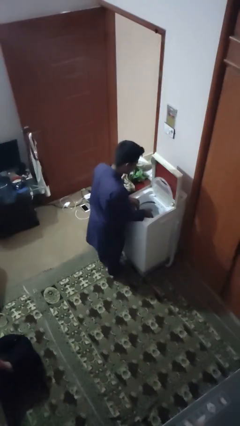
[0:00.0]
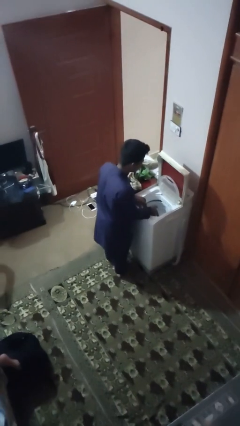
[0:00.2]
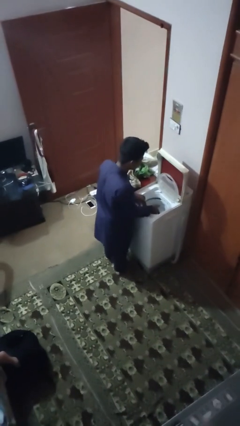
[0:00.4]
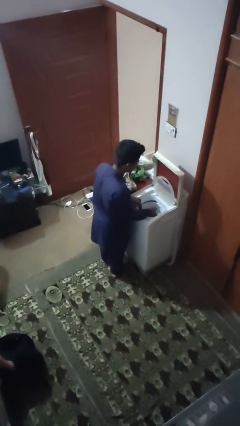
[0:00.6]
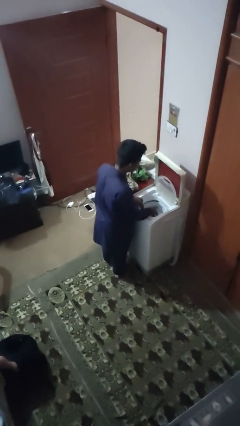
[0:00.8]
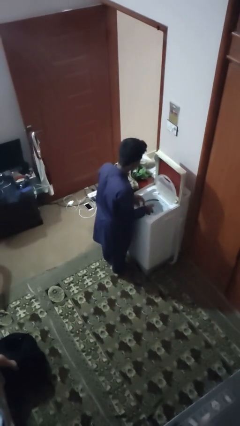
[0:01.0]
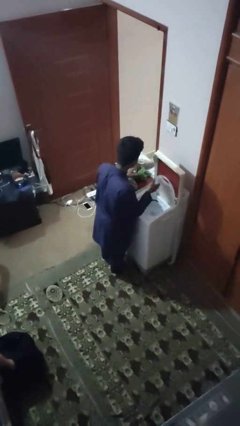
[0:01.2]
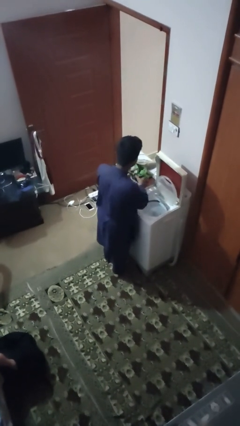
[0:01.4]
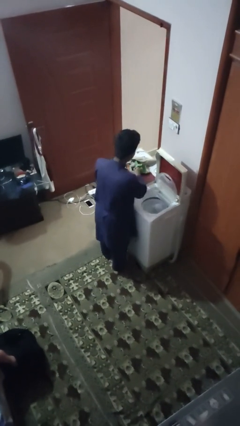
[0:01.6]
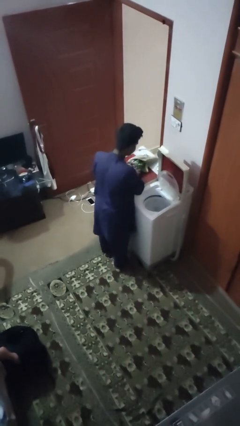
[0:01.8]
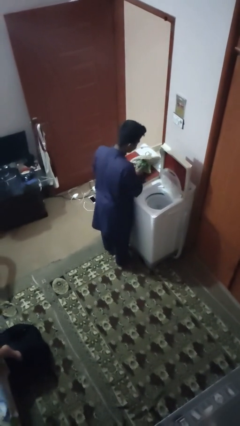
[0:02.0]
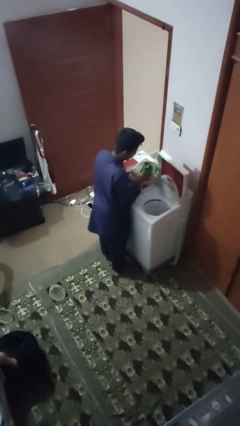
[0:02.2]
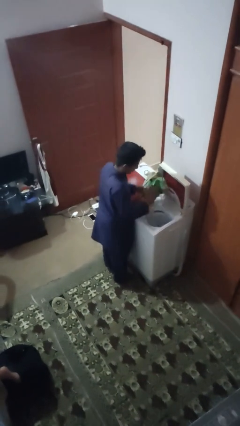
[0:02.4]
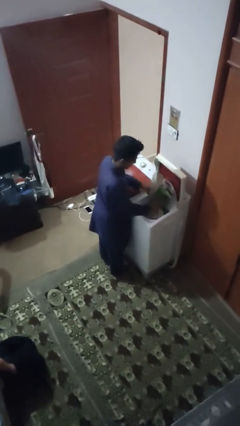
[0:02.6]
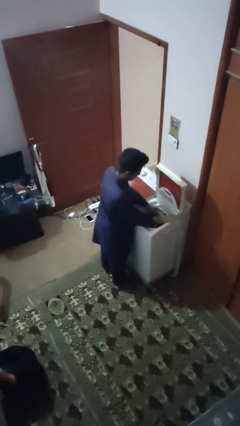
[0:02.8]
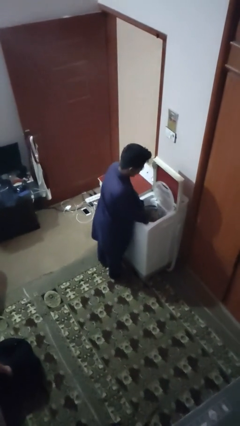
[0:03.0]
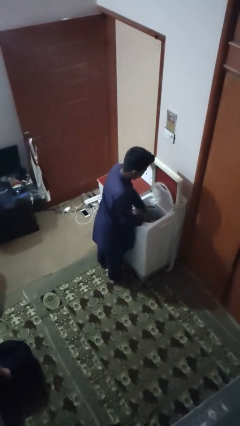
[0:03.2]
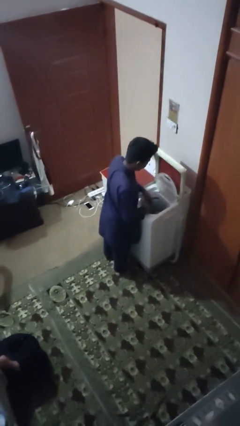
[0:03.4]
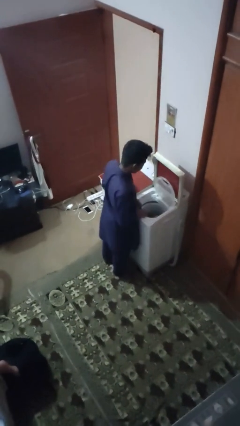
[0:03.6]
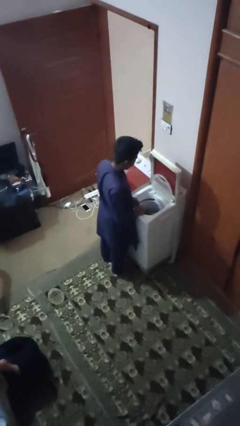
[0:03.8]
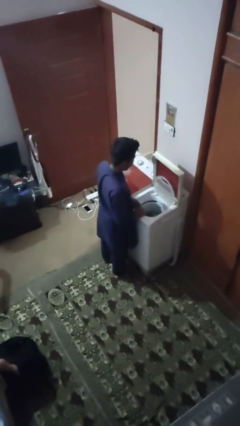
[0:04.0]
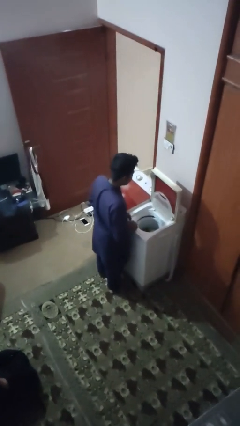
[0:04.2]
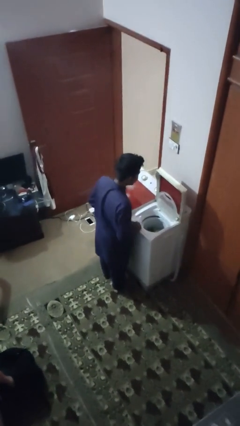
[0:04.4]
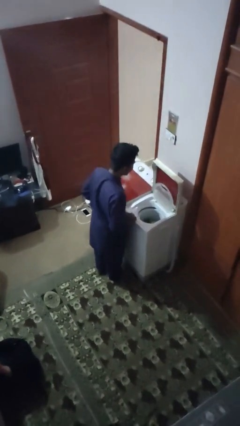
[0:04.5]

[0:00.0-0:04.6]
person loads dryer

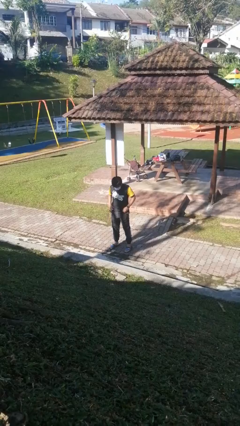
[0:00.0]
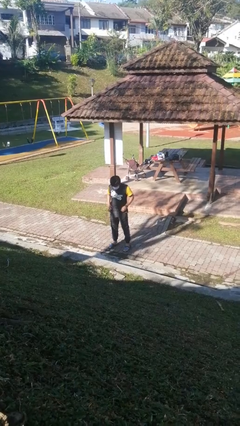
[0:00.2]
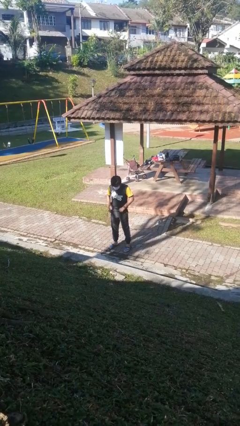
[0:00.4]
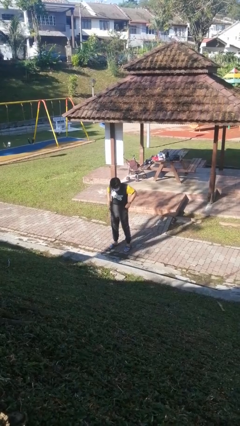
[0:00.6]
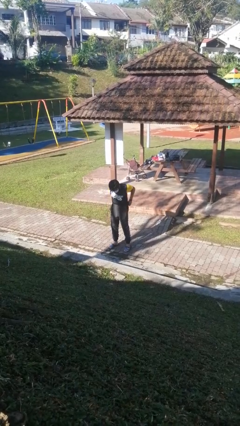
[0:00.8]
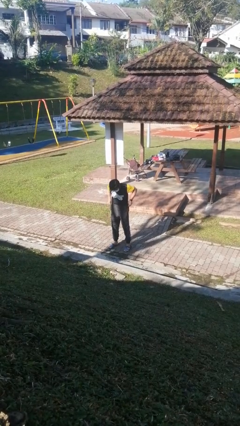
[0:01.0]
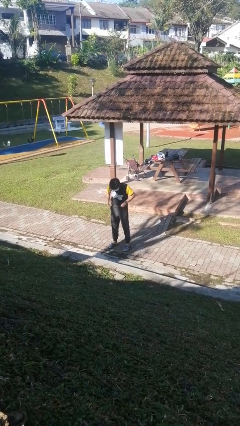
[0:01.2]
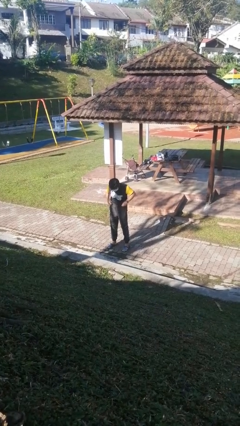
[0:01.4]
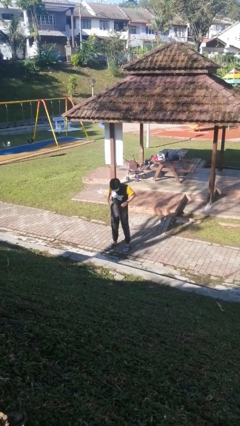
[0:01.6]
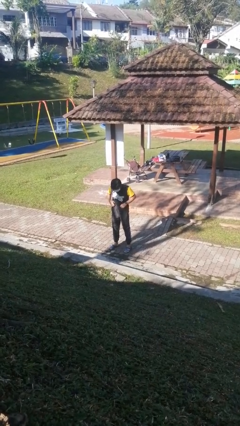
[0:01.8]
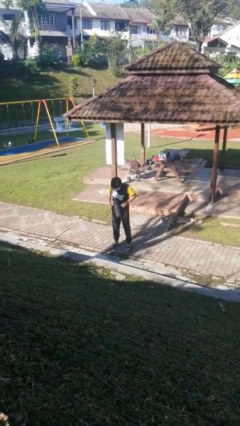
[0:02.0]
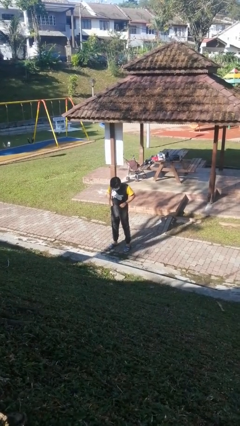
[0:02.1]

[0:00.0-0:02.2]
person hikes up pants

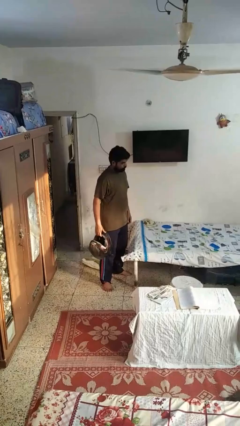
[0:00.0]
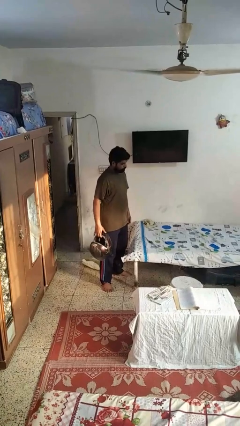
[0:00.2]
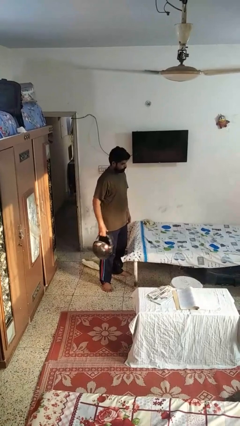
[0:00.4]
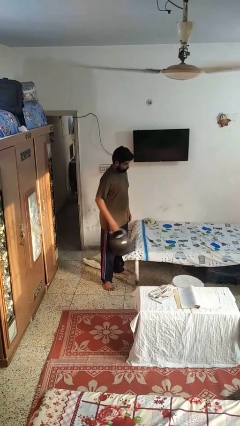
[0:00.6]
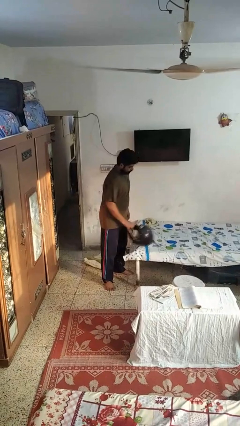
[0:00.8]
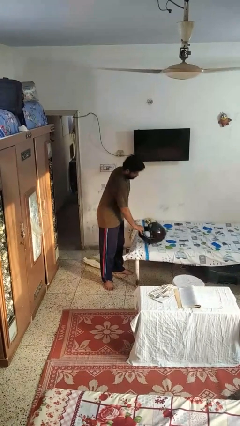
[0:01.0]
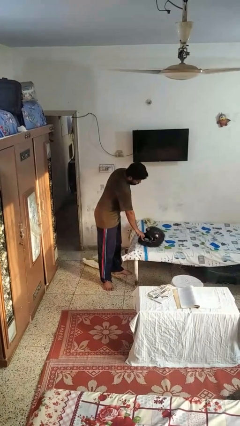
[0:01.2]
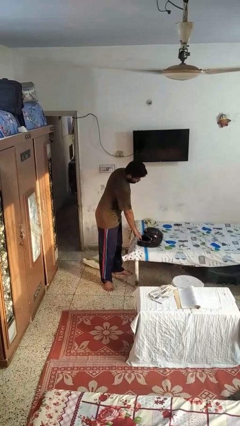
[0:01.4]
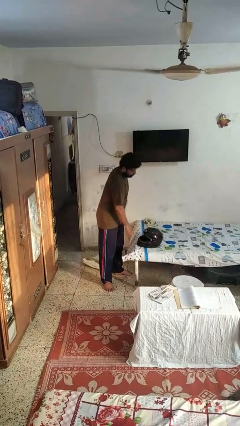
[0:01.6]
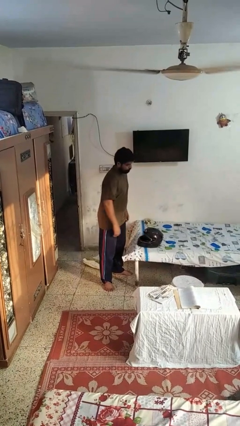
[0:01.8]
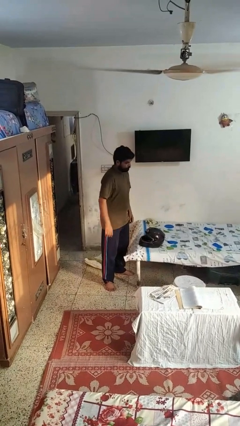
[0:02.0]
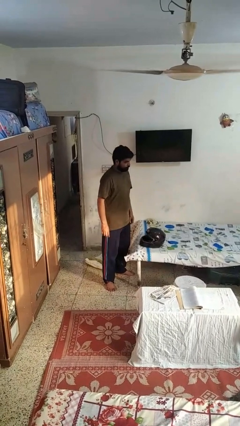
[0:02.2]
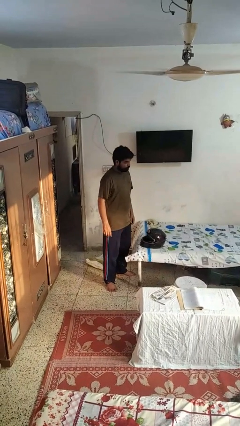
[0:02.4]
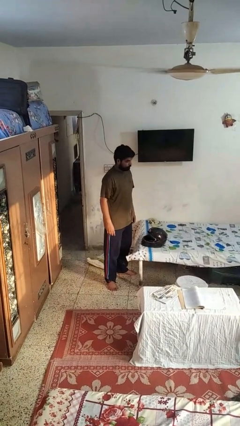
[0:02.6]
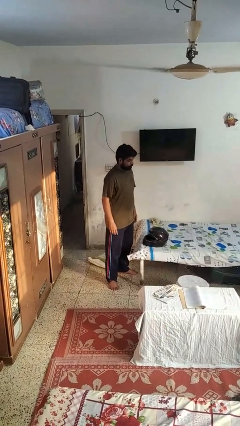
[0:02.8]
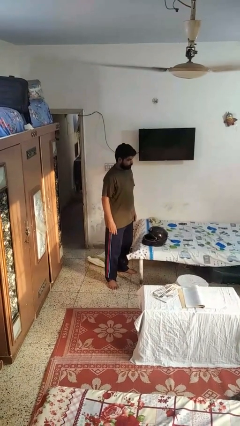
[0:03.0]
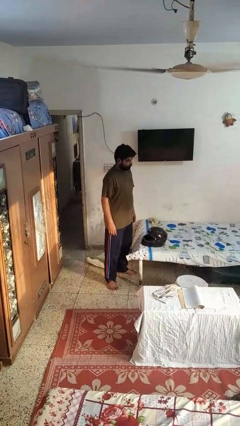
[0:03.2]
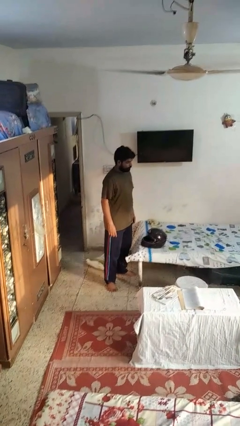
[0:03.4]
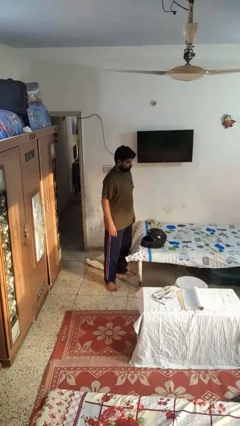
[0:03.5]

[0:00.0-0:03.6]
person puts down object on bed

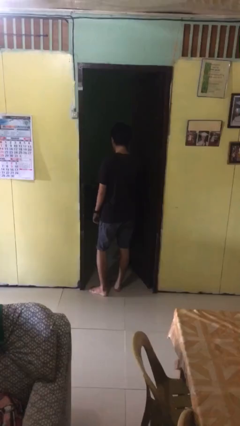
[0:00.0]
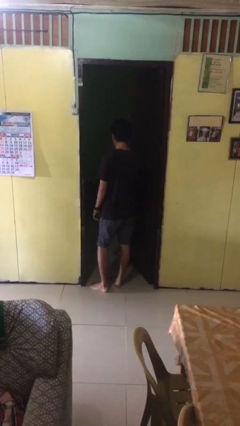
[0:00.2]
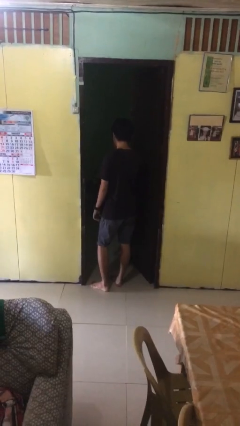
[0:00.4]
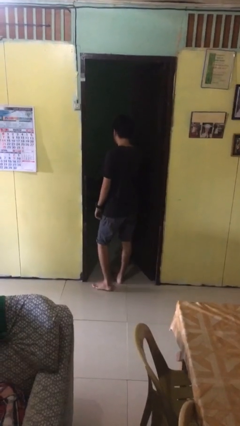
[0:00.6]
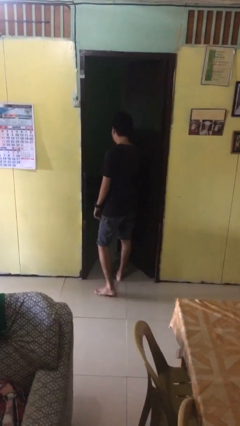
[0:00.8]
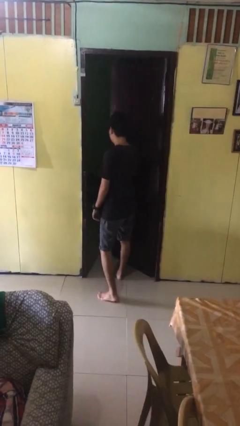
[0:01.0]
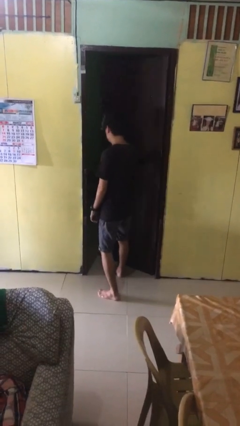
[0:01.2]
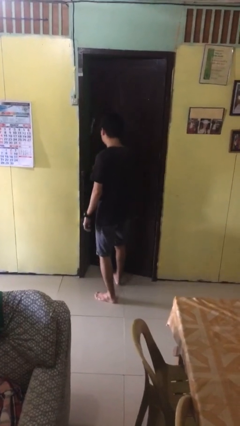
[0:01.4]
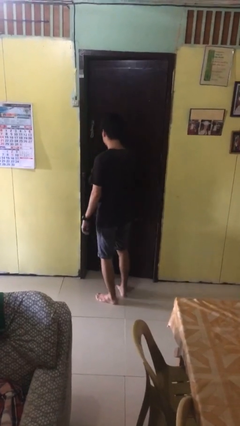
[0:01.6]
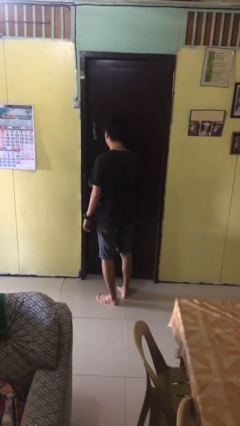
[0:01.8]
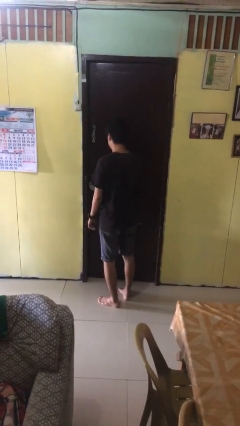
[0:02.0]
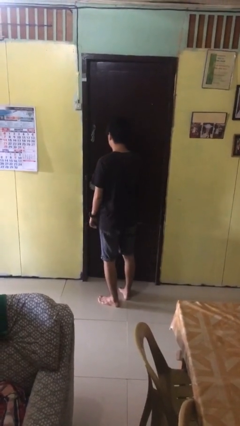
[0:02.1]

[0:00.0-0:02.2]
person closes facility door

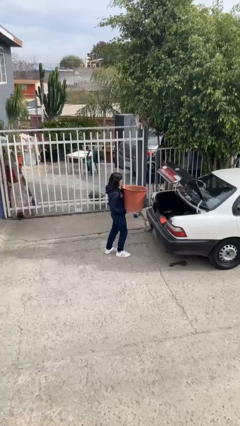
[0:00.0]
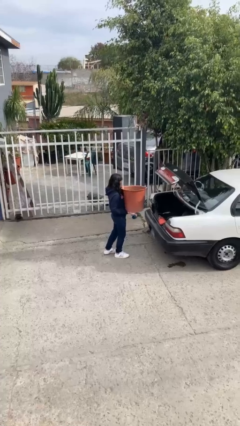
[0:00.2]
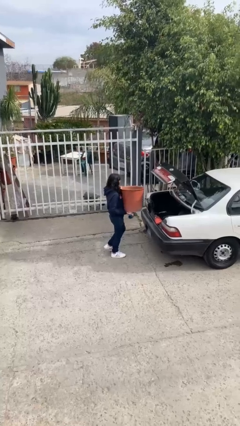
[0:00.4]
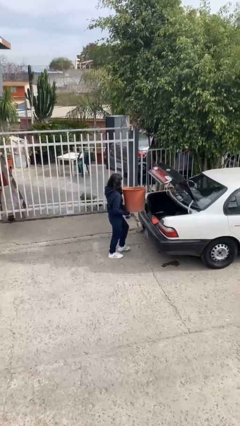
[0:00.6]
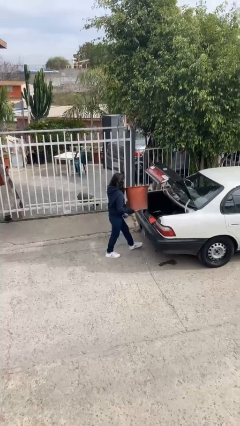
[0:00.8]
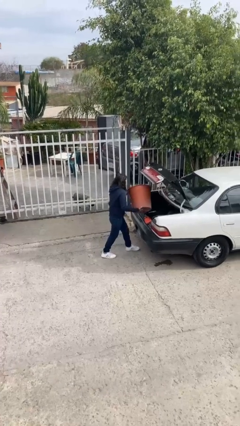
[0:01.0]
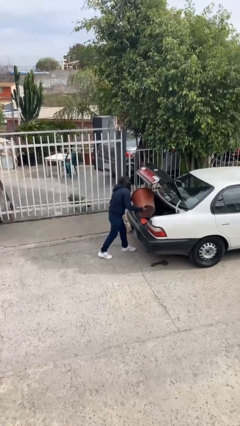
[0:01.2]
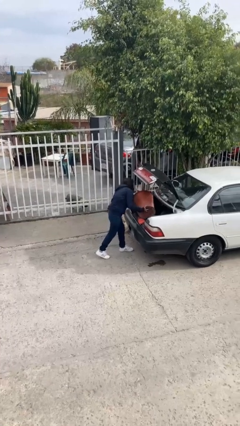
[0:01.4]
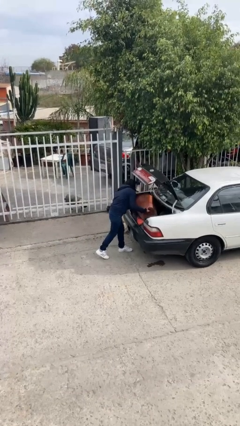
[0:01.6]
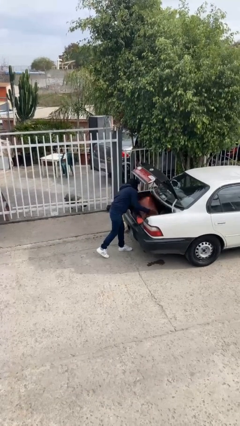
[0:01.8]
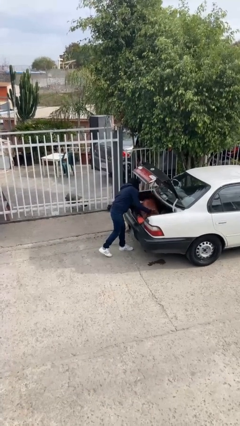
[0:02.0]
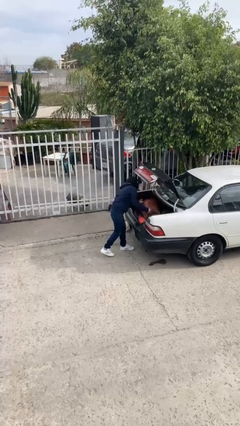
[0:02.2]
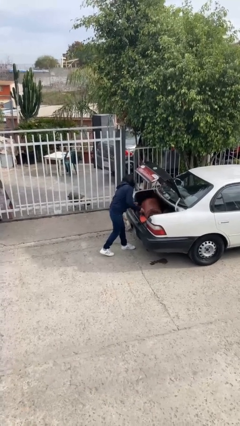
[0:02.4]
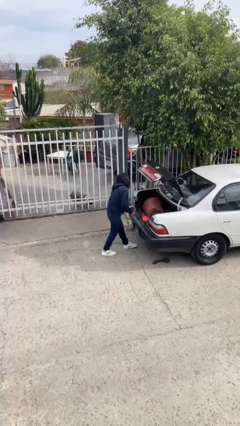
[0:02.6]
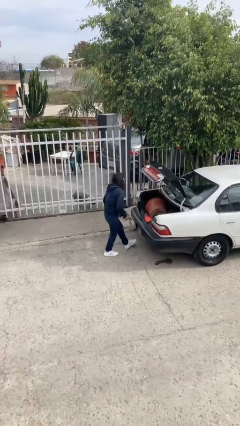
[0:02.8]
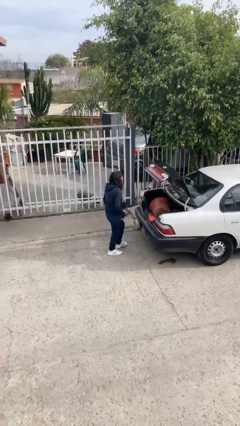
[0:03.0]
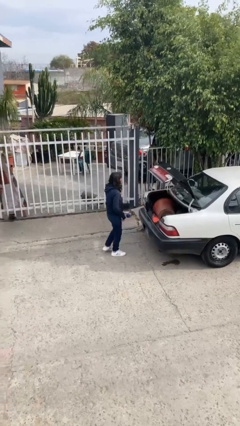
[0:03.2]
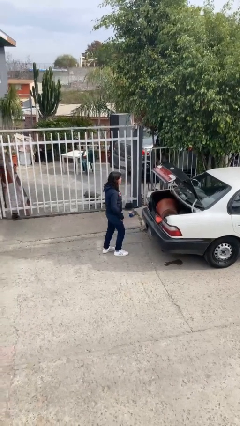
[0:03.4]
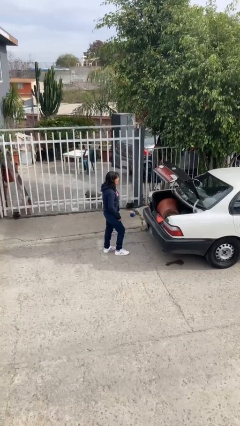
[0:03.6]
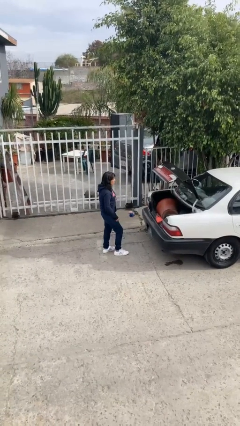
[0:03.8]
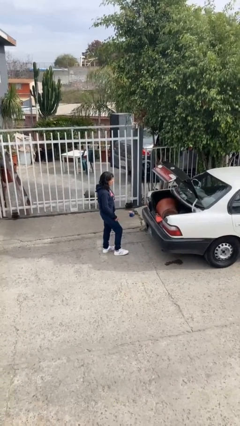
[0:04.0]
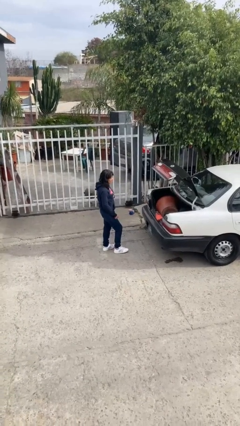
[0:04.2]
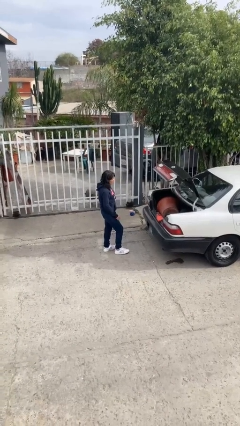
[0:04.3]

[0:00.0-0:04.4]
person loads car

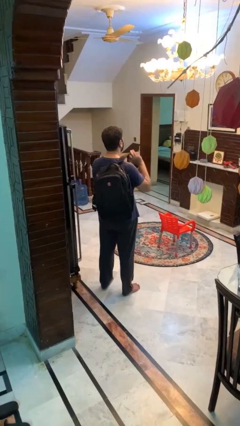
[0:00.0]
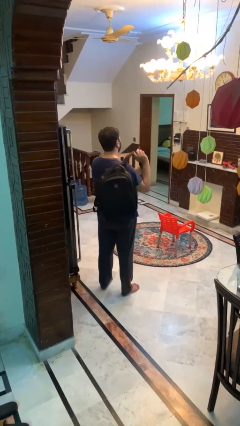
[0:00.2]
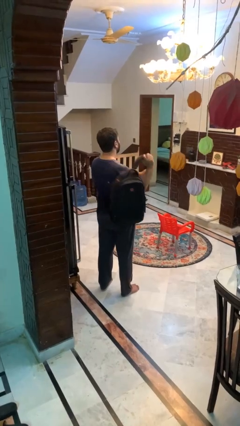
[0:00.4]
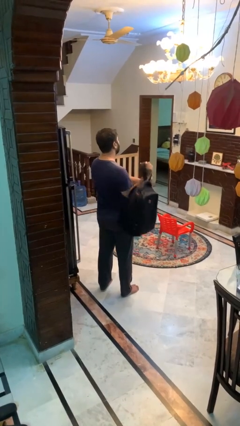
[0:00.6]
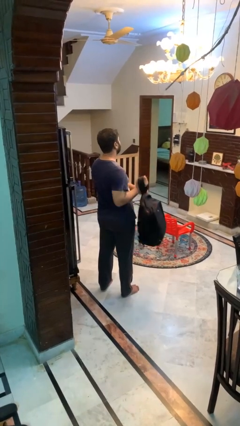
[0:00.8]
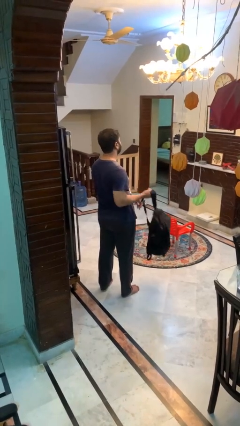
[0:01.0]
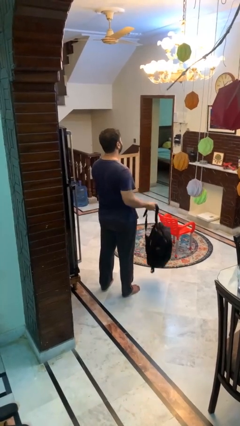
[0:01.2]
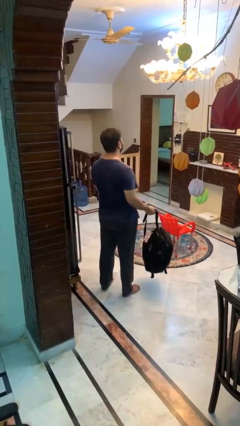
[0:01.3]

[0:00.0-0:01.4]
person takes off backpack
